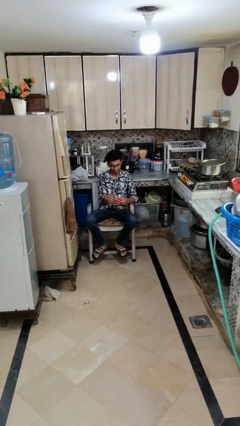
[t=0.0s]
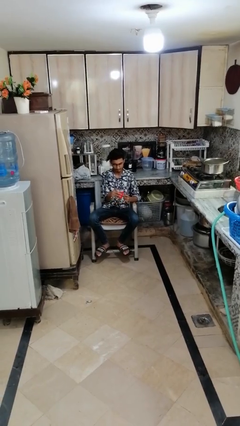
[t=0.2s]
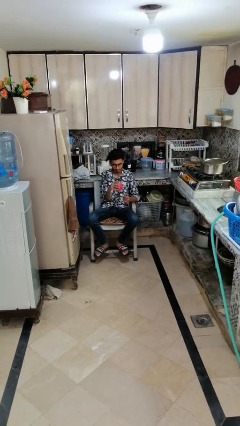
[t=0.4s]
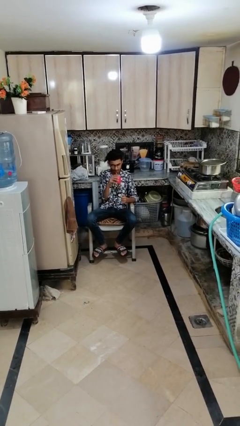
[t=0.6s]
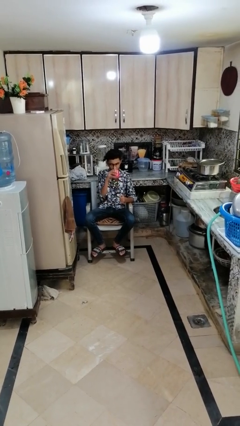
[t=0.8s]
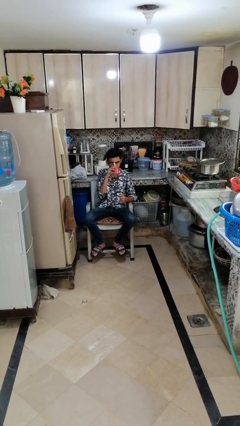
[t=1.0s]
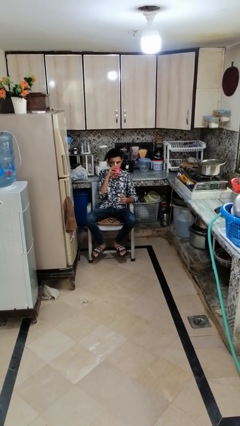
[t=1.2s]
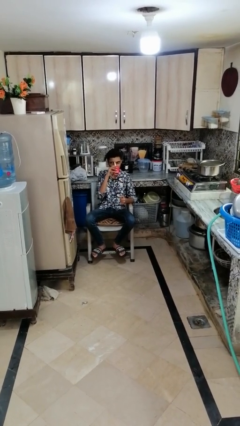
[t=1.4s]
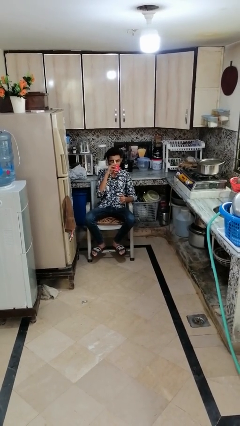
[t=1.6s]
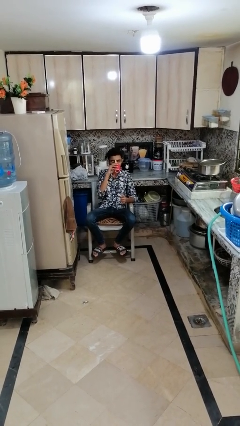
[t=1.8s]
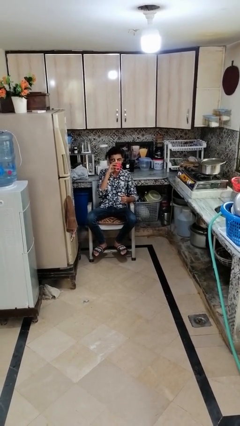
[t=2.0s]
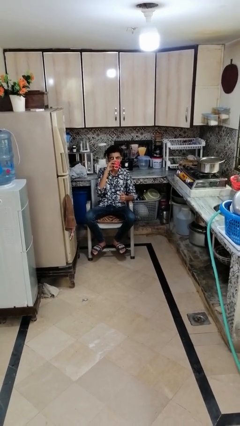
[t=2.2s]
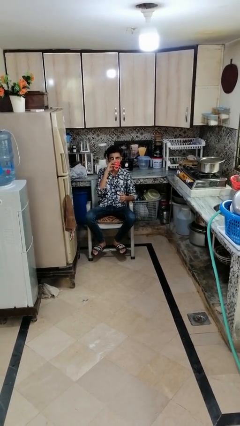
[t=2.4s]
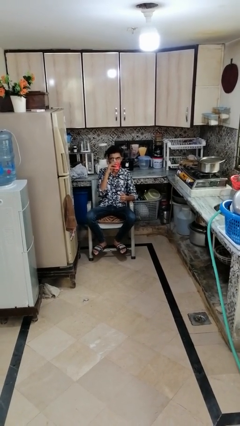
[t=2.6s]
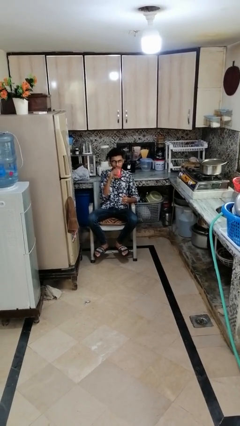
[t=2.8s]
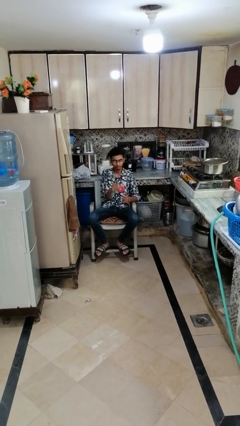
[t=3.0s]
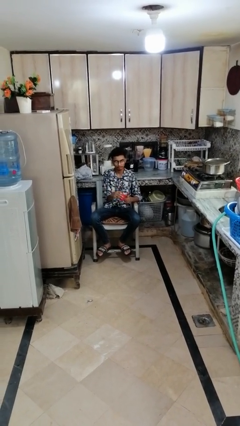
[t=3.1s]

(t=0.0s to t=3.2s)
person drinks from mug

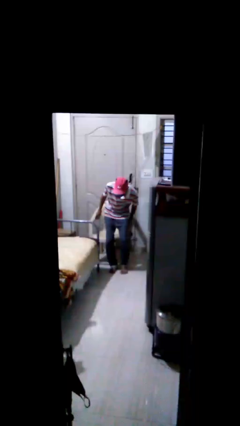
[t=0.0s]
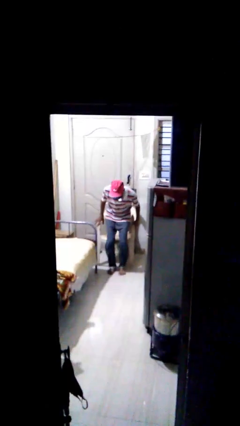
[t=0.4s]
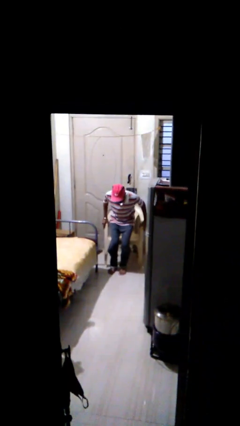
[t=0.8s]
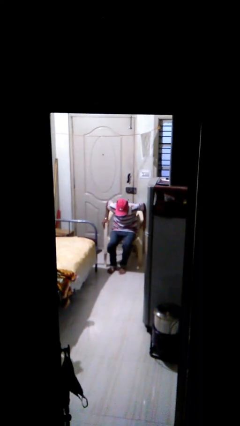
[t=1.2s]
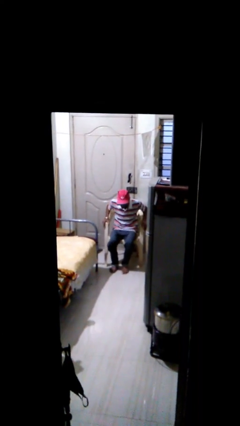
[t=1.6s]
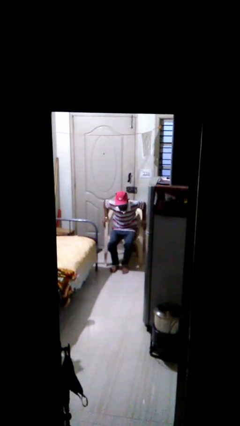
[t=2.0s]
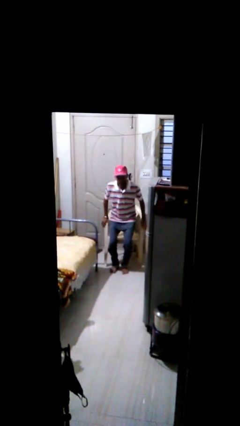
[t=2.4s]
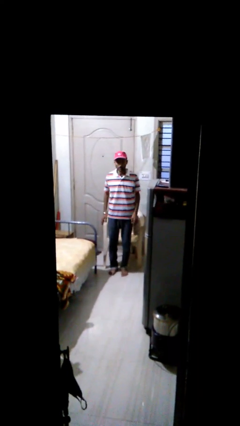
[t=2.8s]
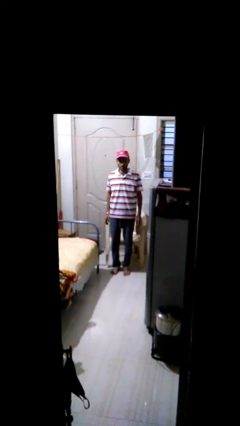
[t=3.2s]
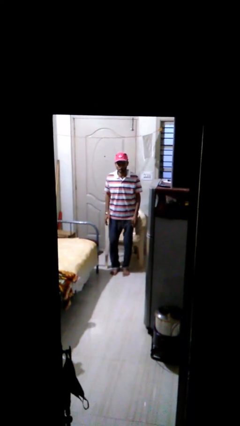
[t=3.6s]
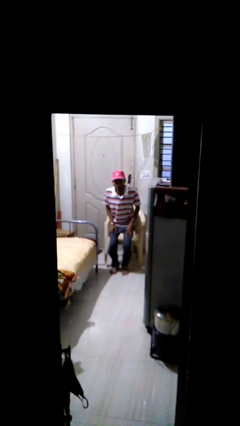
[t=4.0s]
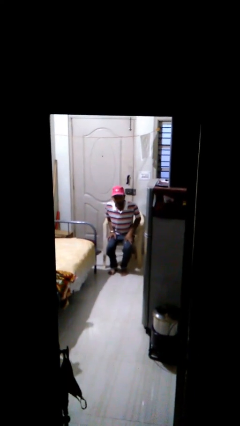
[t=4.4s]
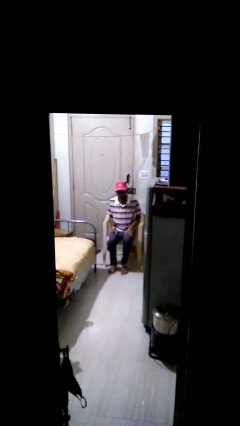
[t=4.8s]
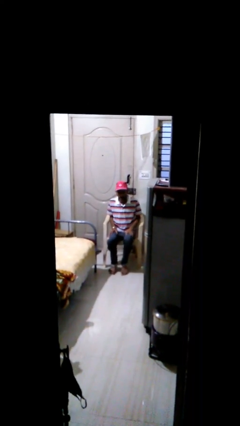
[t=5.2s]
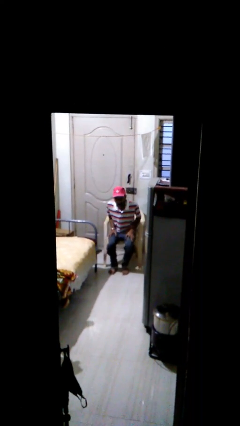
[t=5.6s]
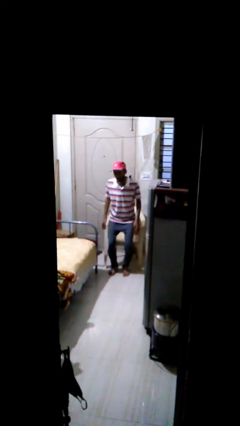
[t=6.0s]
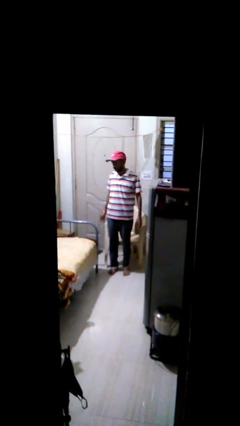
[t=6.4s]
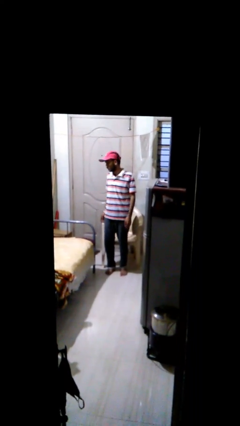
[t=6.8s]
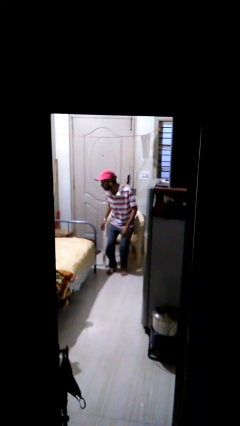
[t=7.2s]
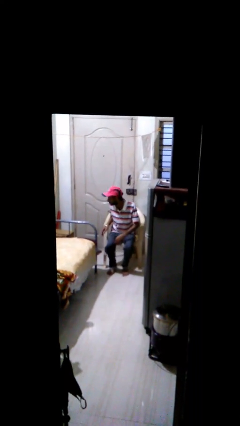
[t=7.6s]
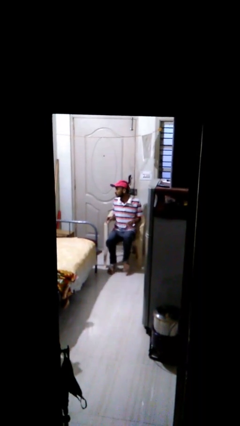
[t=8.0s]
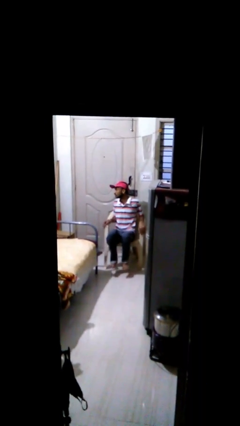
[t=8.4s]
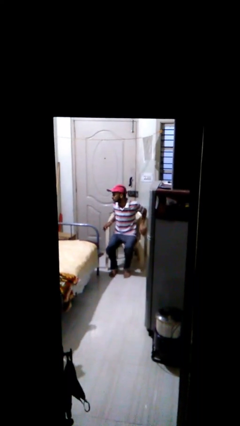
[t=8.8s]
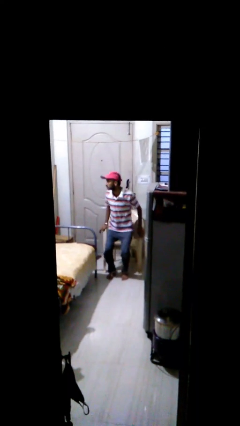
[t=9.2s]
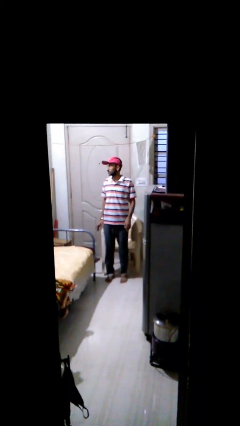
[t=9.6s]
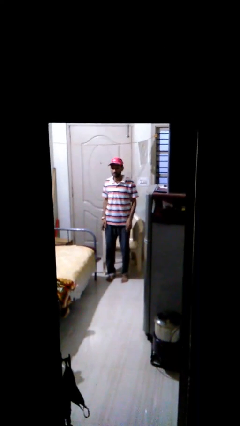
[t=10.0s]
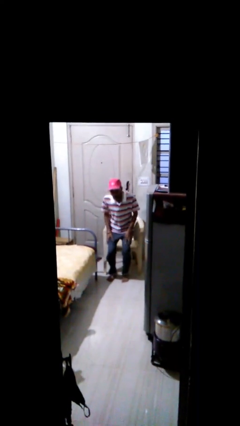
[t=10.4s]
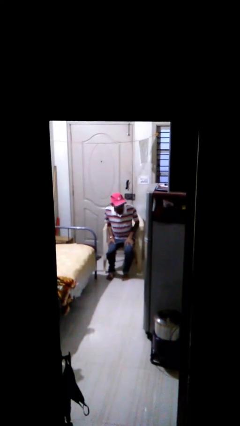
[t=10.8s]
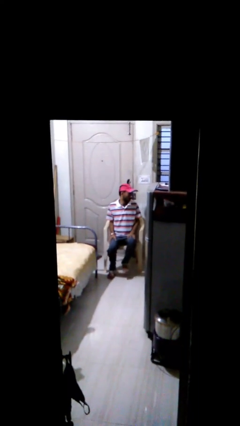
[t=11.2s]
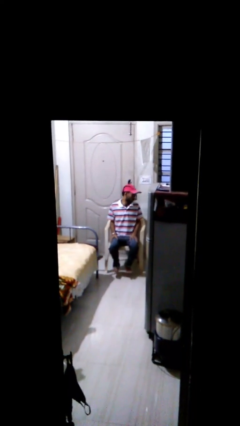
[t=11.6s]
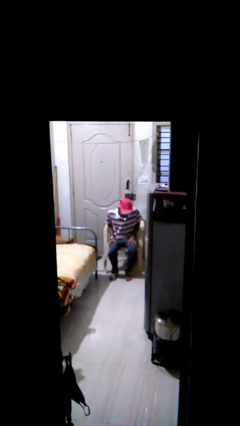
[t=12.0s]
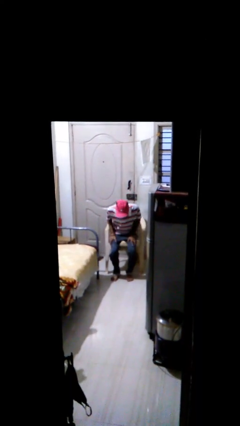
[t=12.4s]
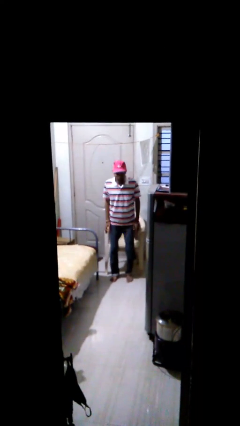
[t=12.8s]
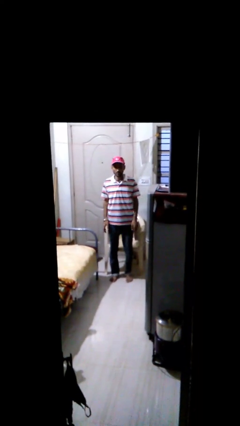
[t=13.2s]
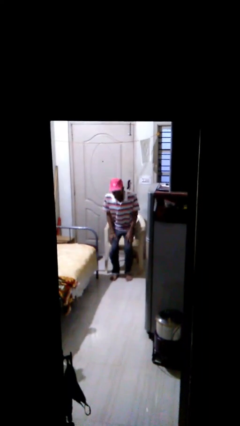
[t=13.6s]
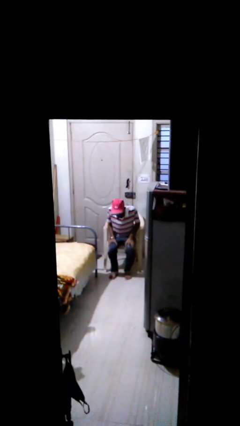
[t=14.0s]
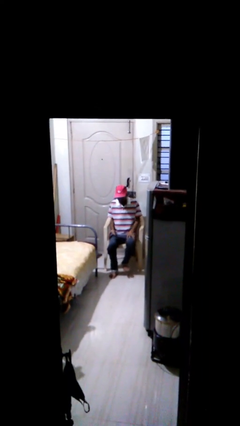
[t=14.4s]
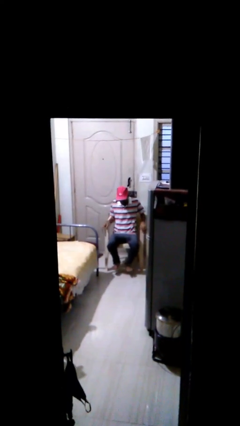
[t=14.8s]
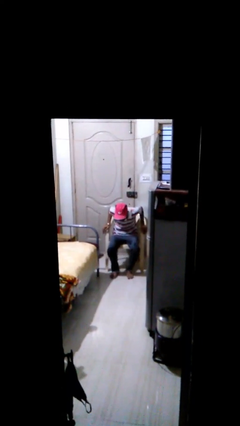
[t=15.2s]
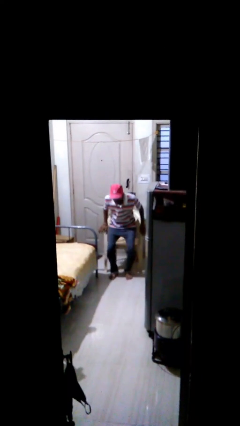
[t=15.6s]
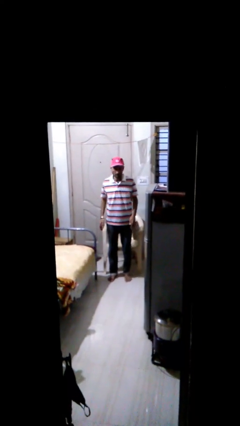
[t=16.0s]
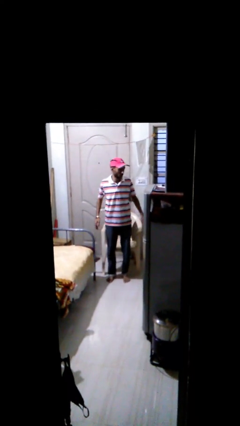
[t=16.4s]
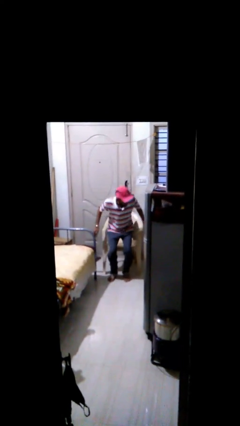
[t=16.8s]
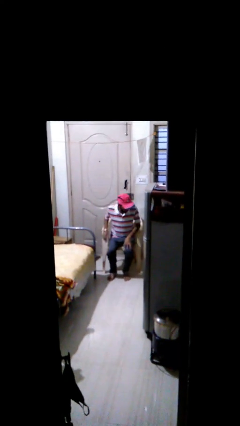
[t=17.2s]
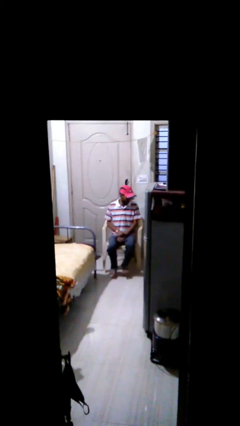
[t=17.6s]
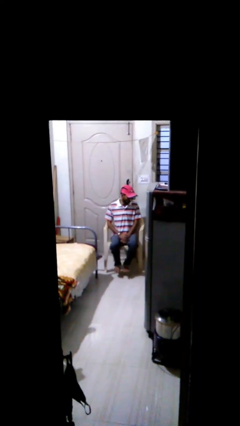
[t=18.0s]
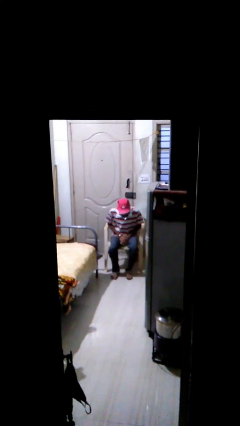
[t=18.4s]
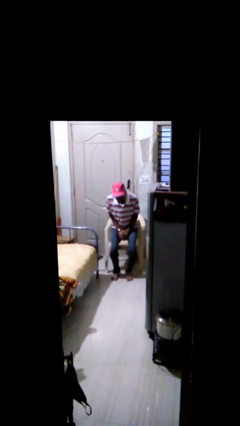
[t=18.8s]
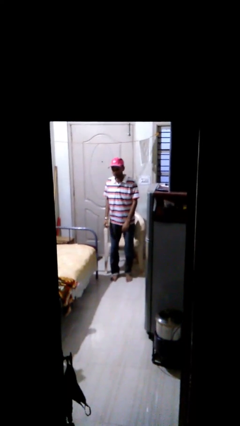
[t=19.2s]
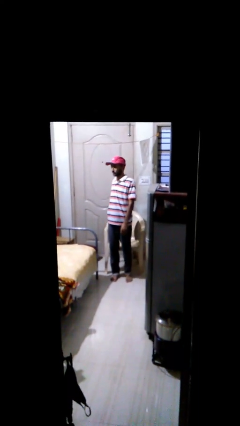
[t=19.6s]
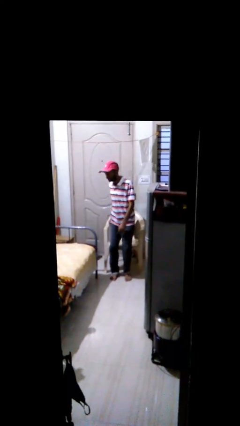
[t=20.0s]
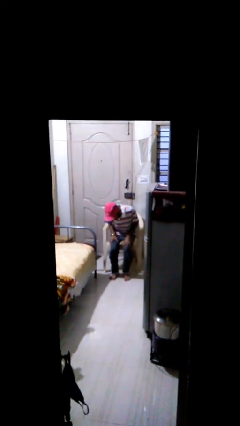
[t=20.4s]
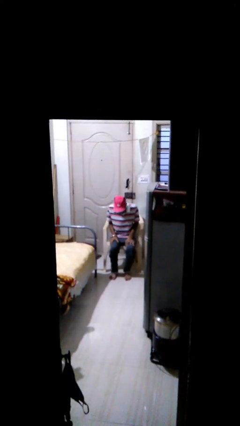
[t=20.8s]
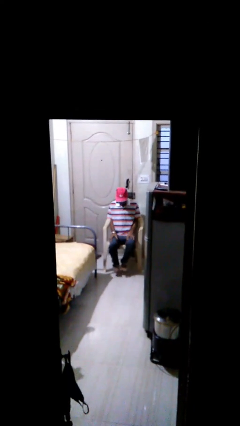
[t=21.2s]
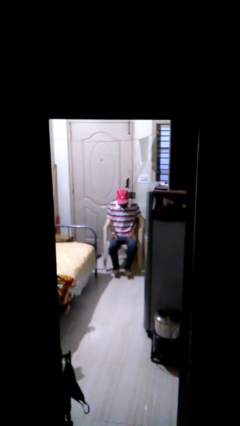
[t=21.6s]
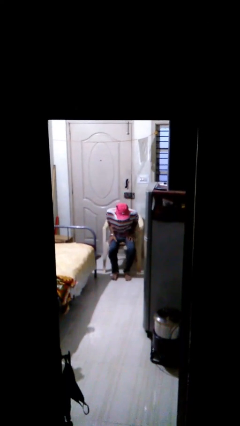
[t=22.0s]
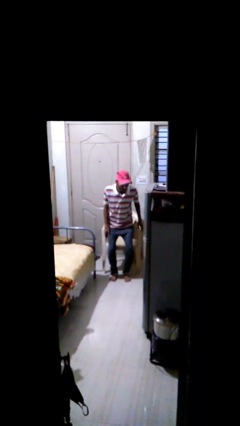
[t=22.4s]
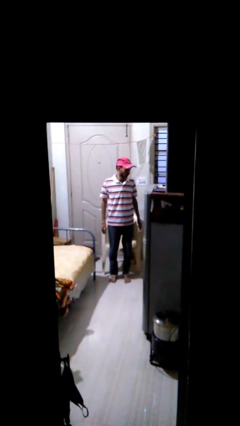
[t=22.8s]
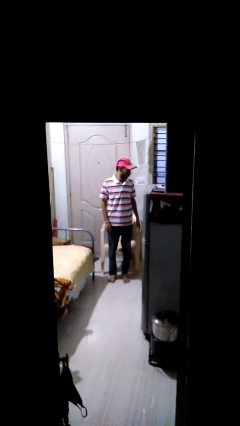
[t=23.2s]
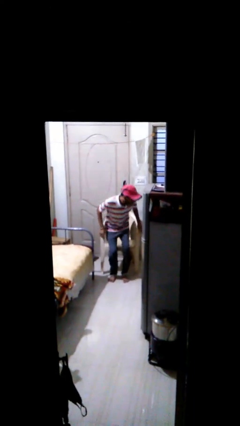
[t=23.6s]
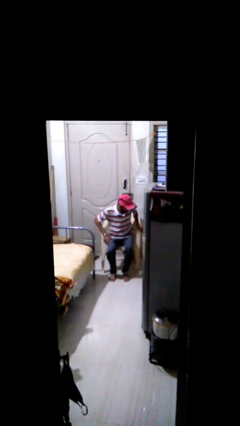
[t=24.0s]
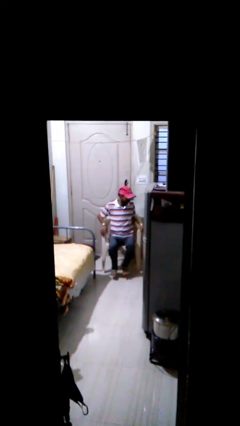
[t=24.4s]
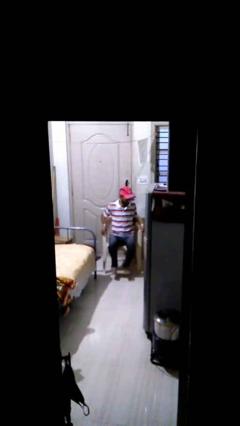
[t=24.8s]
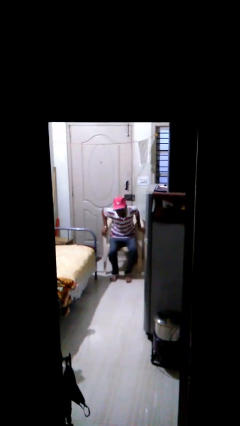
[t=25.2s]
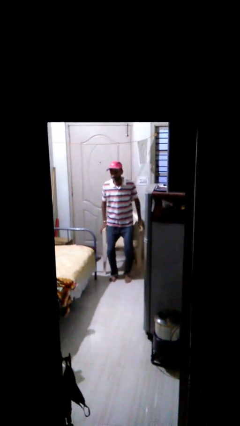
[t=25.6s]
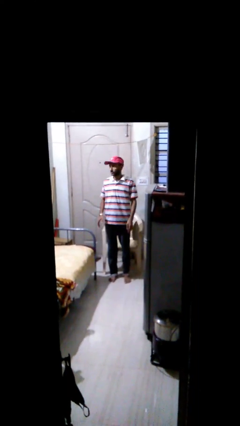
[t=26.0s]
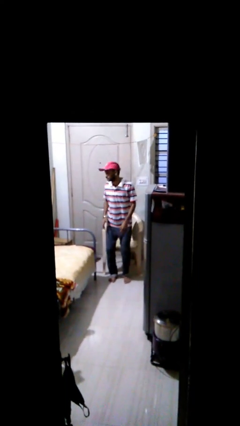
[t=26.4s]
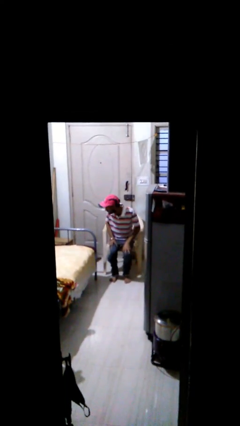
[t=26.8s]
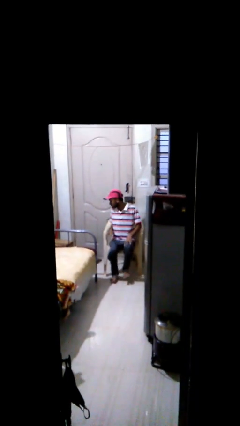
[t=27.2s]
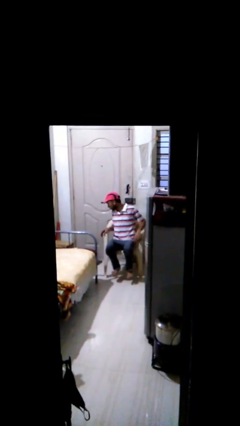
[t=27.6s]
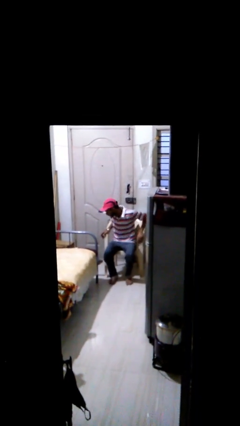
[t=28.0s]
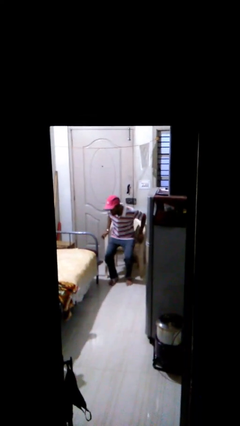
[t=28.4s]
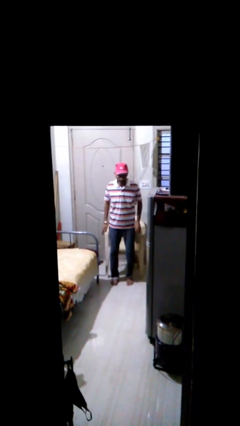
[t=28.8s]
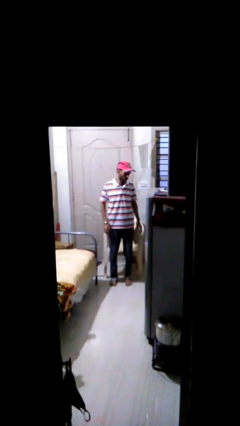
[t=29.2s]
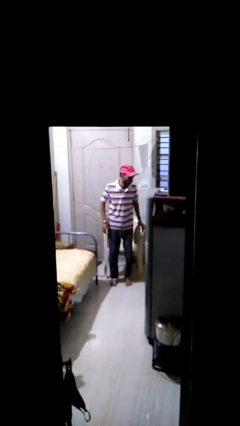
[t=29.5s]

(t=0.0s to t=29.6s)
person sits down

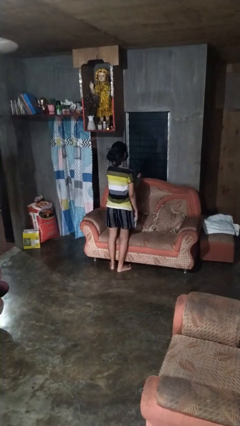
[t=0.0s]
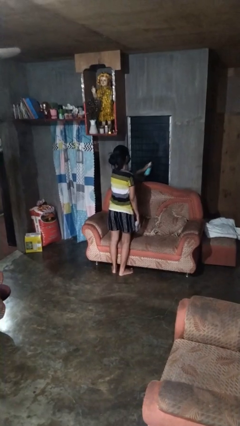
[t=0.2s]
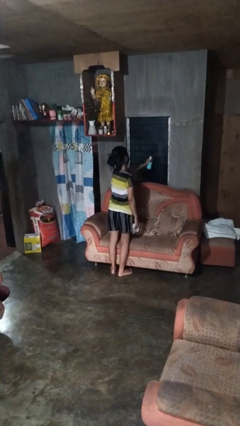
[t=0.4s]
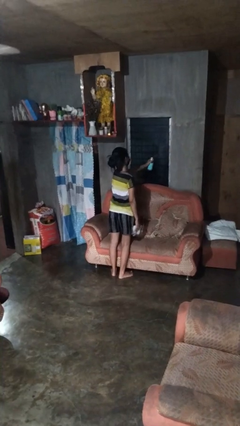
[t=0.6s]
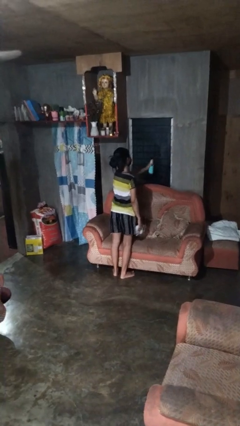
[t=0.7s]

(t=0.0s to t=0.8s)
person sprays from bottle
